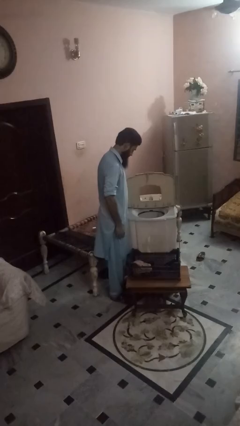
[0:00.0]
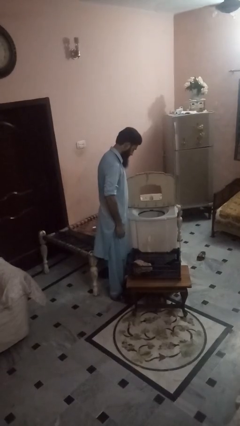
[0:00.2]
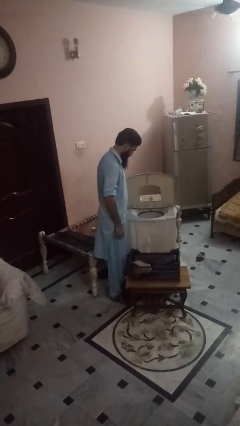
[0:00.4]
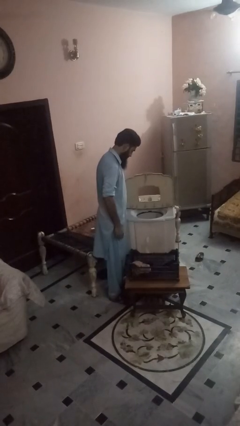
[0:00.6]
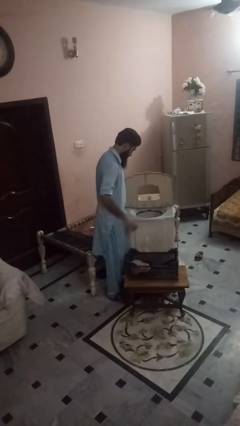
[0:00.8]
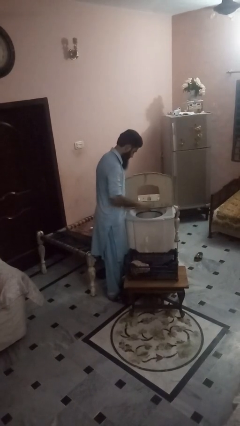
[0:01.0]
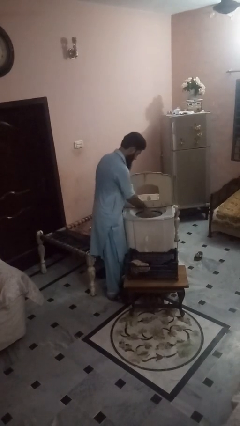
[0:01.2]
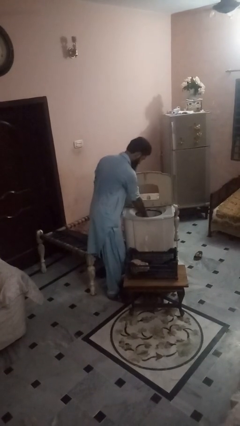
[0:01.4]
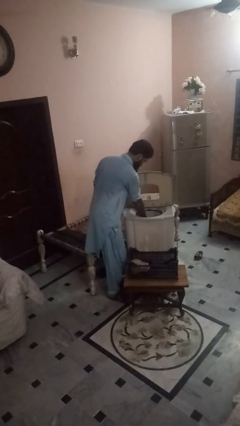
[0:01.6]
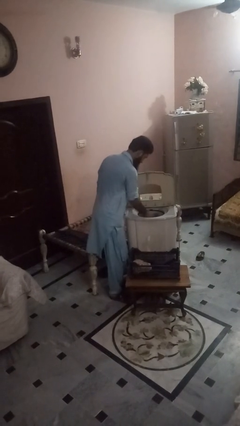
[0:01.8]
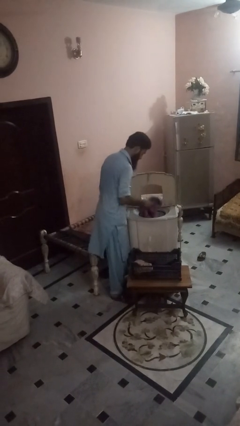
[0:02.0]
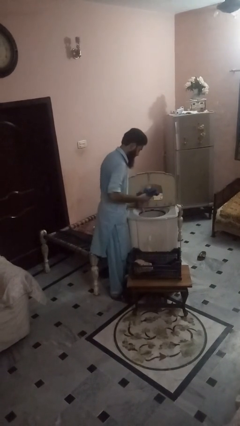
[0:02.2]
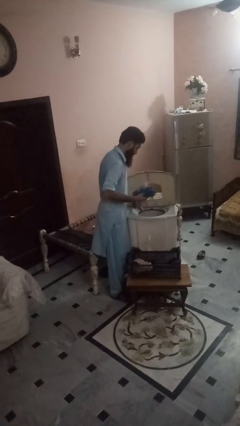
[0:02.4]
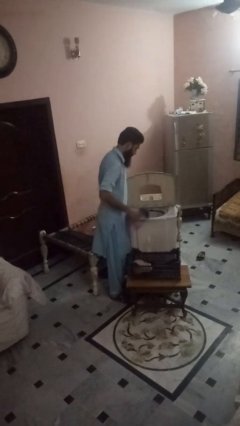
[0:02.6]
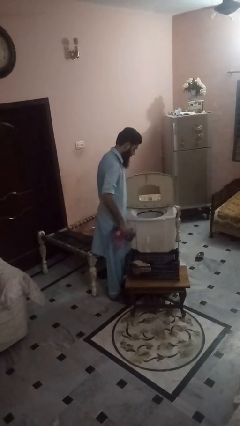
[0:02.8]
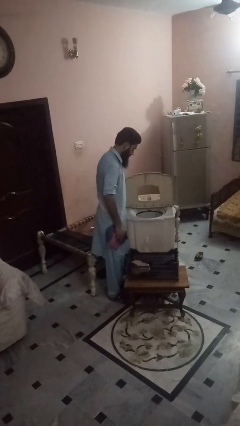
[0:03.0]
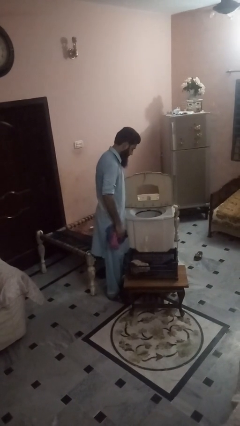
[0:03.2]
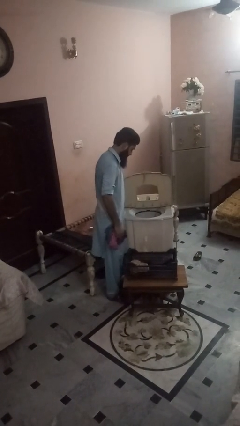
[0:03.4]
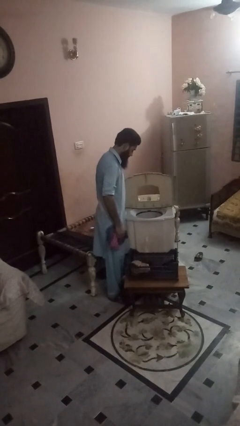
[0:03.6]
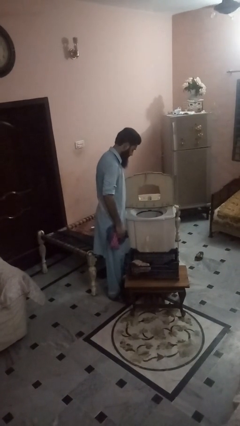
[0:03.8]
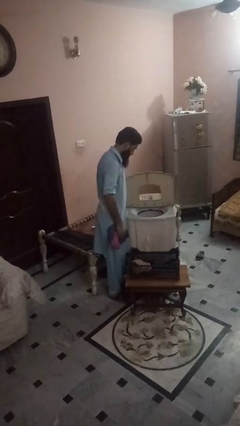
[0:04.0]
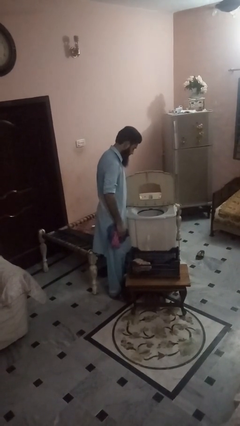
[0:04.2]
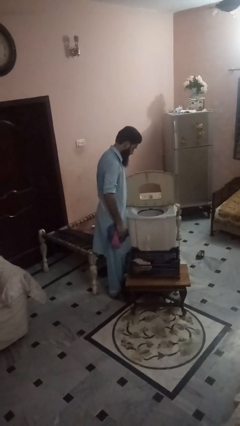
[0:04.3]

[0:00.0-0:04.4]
person unloads dishwasher

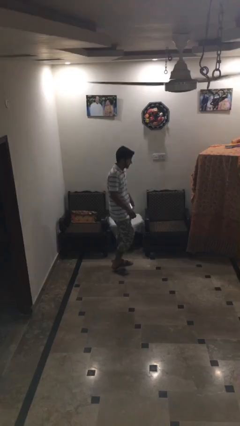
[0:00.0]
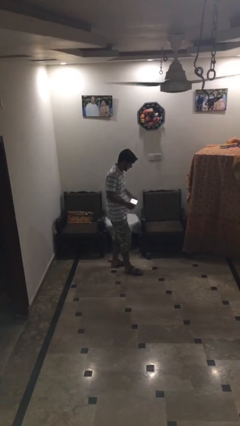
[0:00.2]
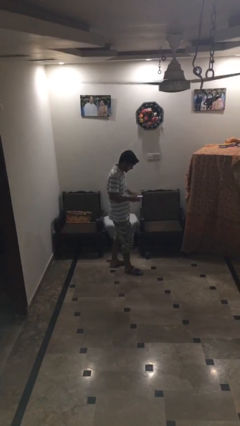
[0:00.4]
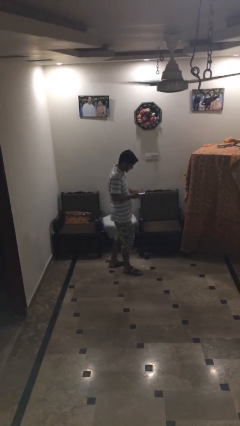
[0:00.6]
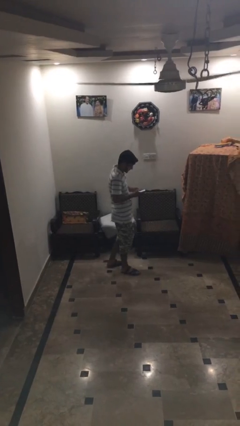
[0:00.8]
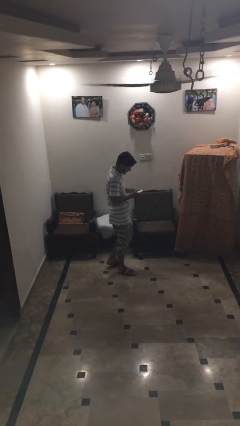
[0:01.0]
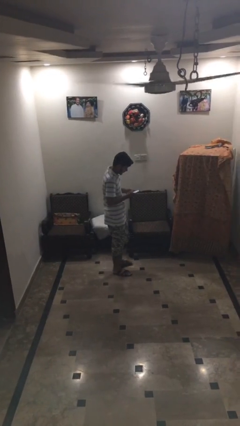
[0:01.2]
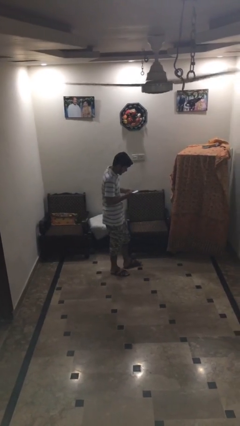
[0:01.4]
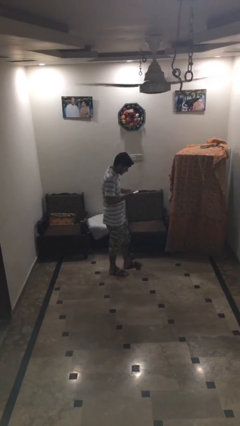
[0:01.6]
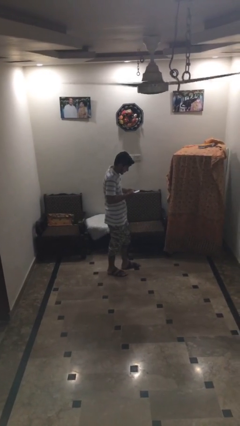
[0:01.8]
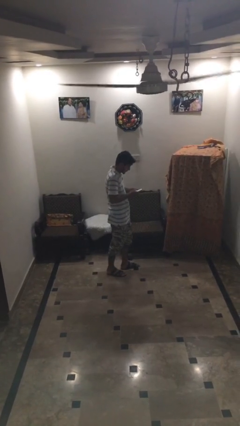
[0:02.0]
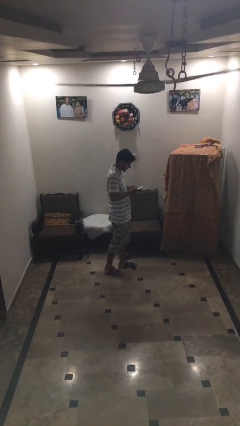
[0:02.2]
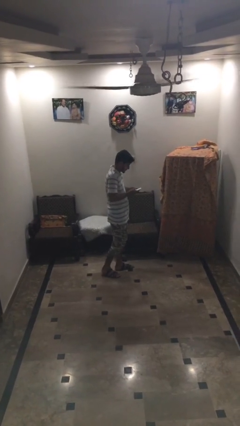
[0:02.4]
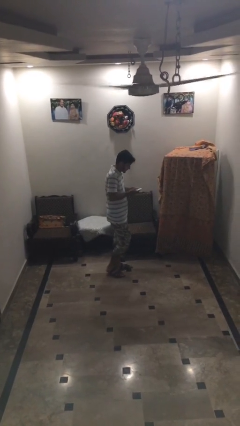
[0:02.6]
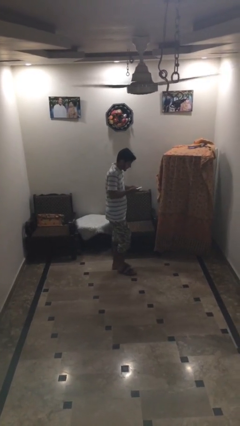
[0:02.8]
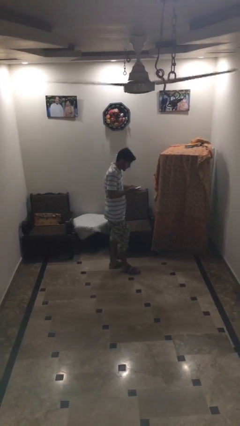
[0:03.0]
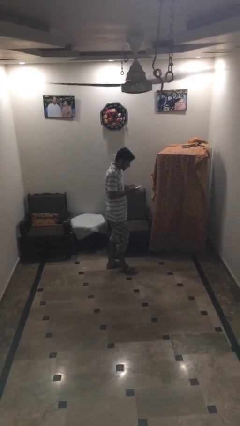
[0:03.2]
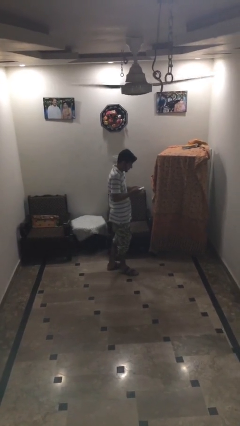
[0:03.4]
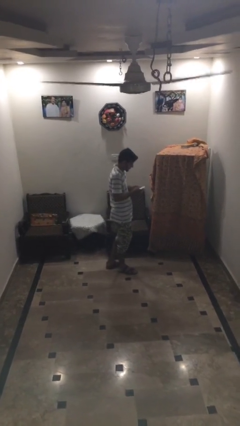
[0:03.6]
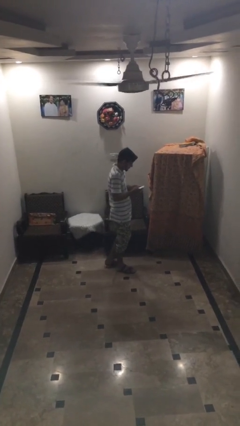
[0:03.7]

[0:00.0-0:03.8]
person texts on phone

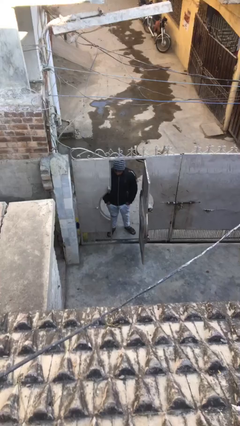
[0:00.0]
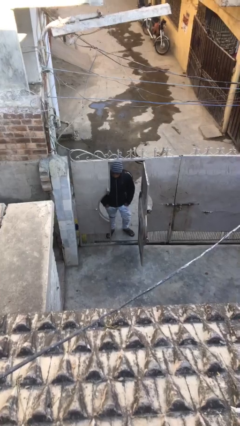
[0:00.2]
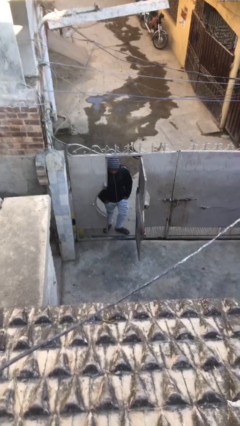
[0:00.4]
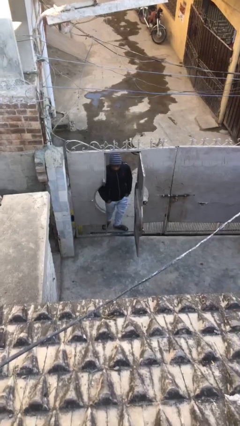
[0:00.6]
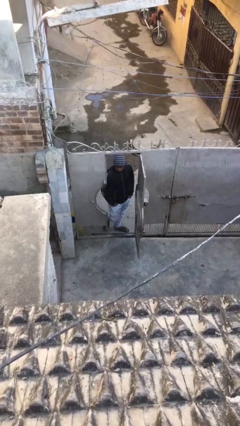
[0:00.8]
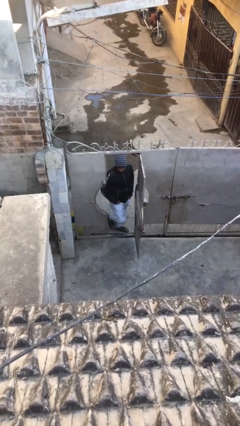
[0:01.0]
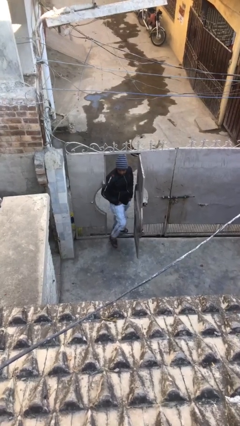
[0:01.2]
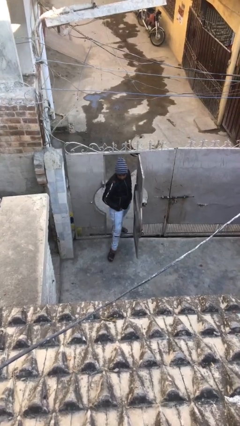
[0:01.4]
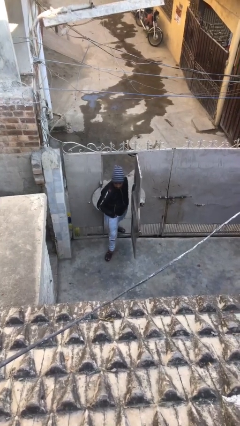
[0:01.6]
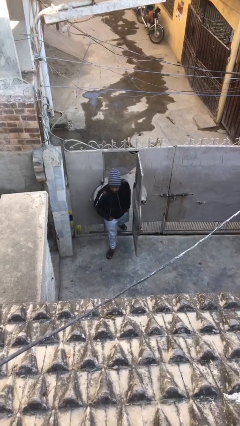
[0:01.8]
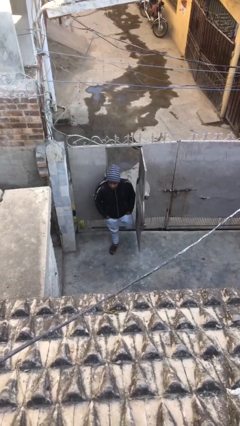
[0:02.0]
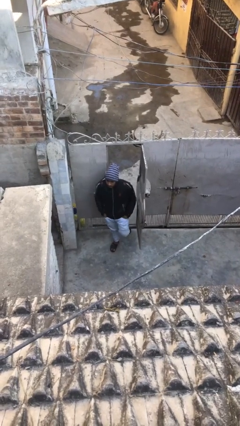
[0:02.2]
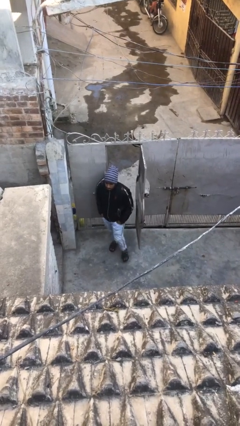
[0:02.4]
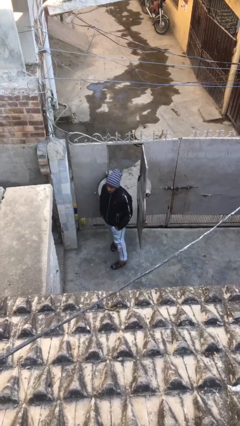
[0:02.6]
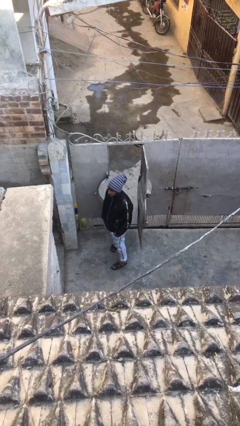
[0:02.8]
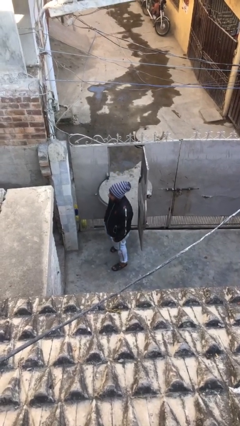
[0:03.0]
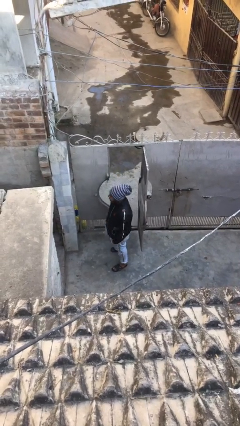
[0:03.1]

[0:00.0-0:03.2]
person enters scene through structure

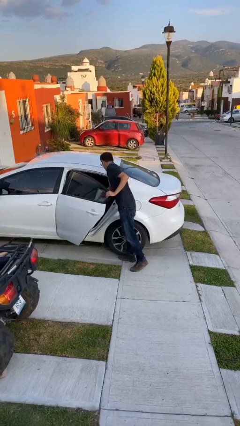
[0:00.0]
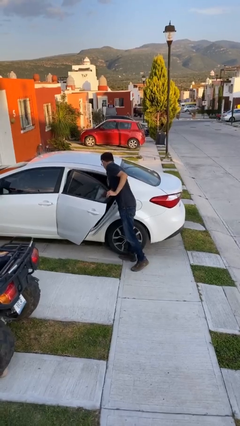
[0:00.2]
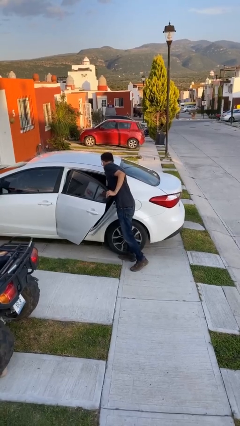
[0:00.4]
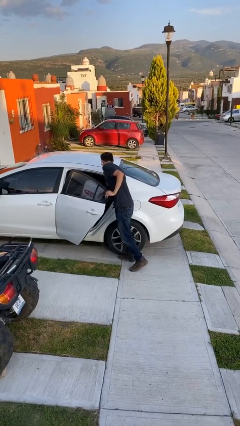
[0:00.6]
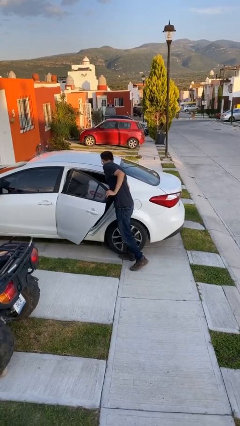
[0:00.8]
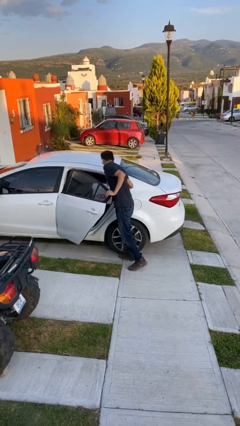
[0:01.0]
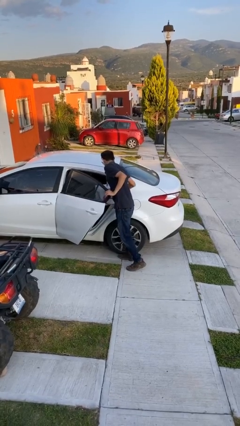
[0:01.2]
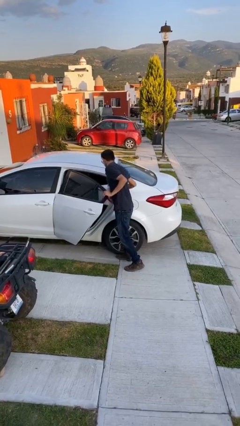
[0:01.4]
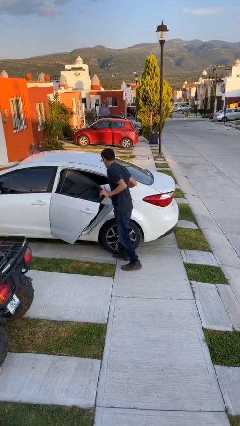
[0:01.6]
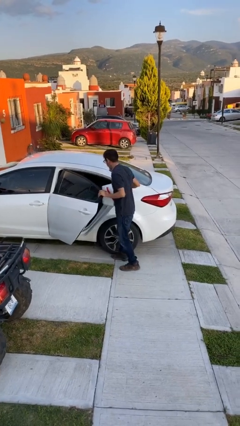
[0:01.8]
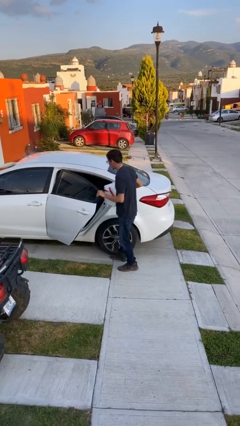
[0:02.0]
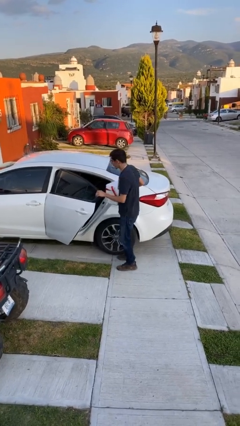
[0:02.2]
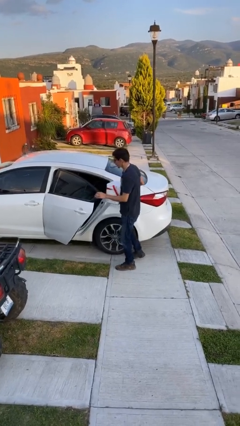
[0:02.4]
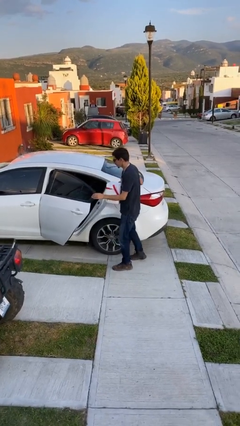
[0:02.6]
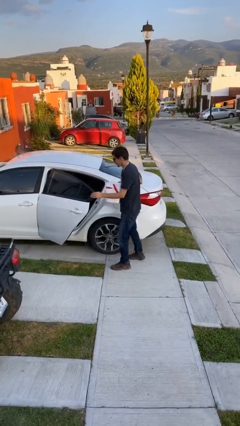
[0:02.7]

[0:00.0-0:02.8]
person unloads car

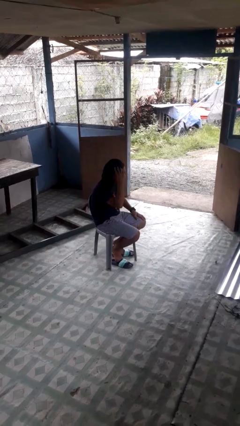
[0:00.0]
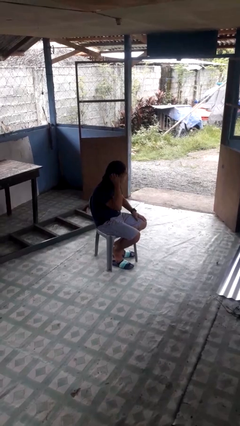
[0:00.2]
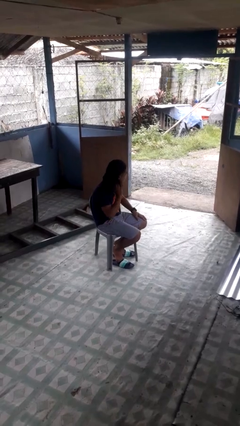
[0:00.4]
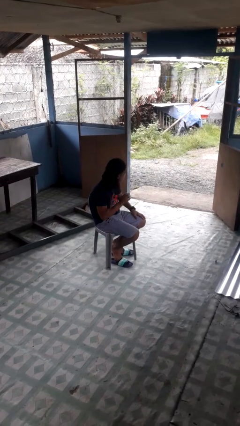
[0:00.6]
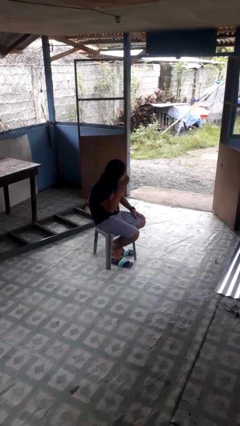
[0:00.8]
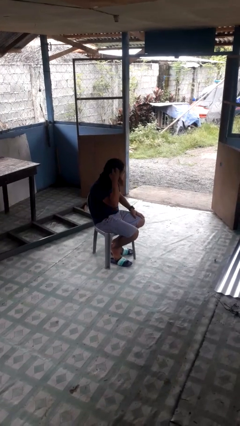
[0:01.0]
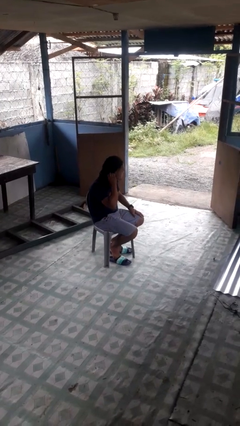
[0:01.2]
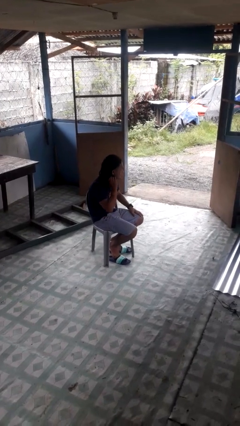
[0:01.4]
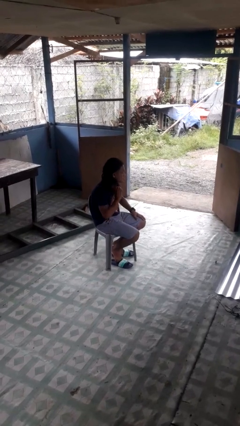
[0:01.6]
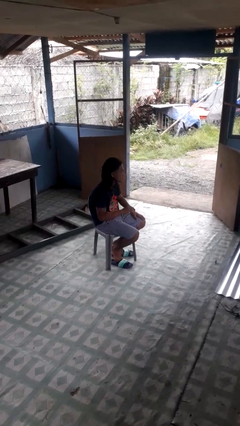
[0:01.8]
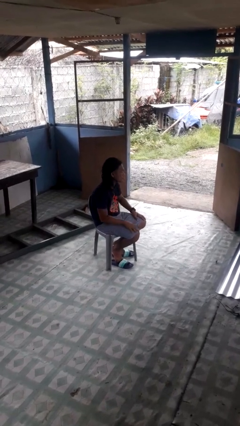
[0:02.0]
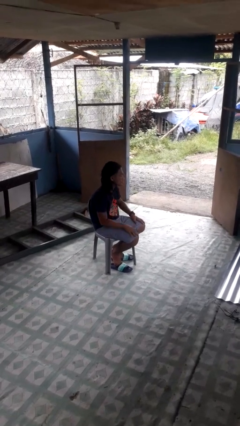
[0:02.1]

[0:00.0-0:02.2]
person strokes hair

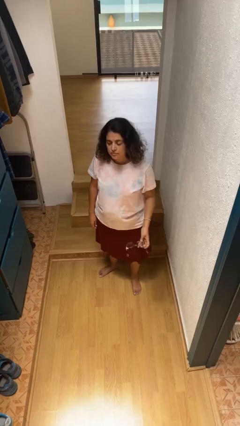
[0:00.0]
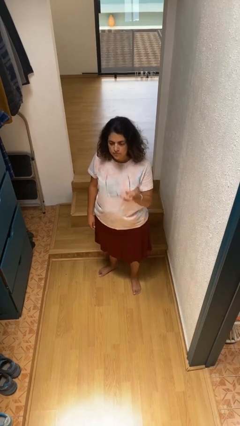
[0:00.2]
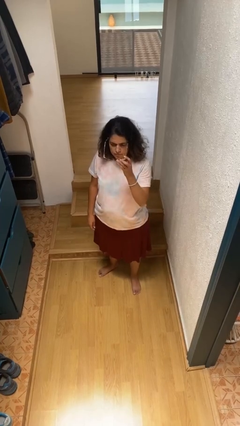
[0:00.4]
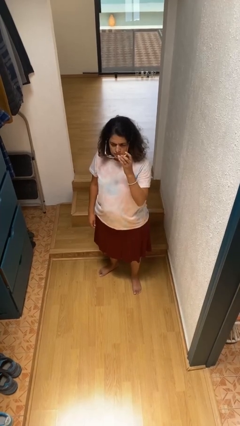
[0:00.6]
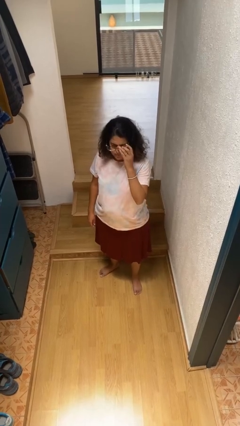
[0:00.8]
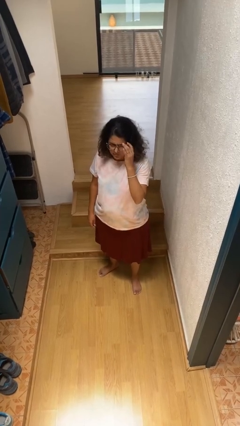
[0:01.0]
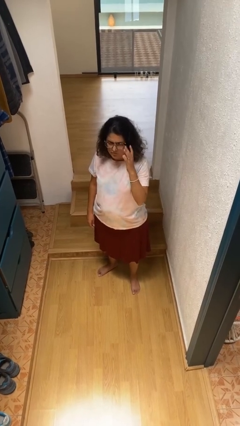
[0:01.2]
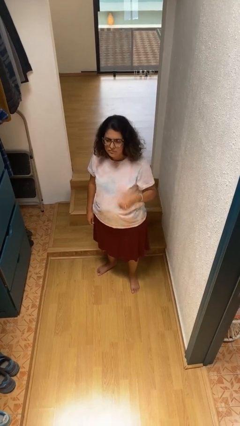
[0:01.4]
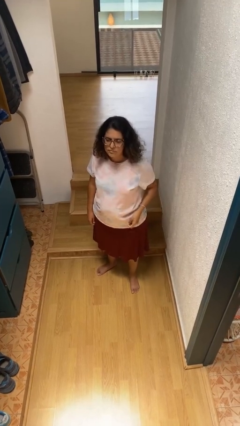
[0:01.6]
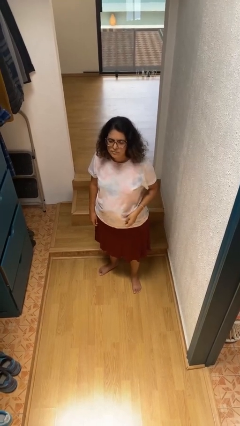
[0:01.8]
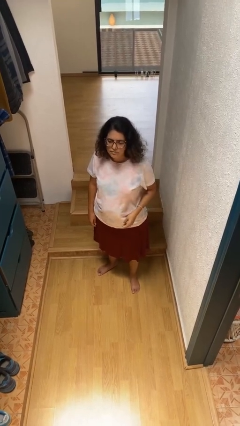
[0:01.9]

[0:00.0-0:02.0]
person puts on glasses
